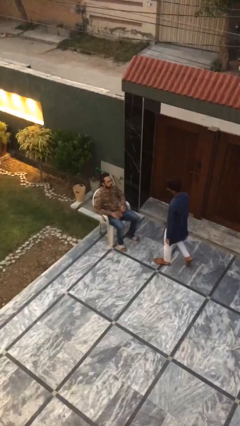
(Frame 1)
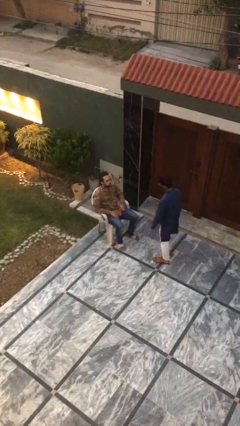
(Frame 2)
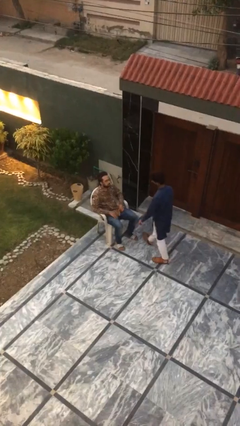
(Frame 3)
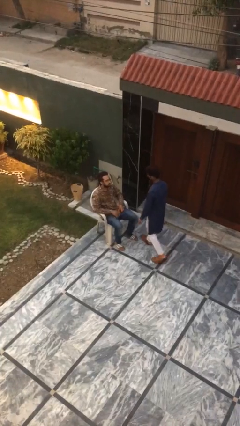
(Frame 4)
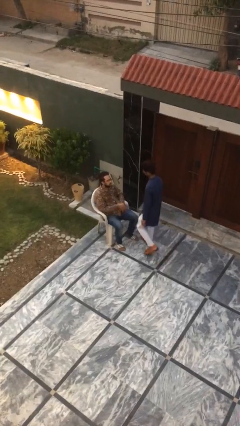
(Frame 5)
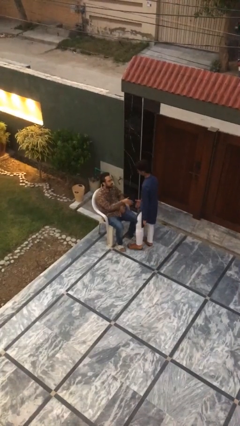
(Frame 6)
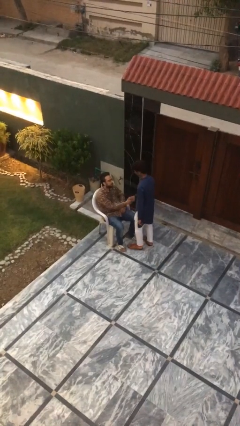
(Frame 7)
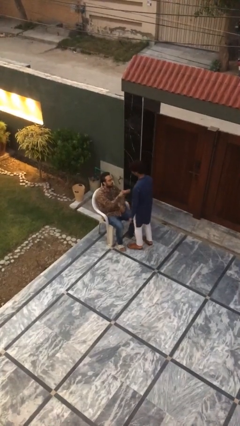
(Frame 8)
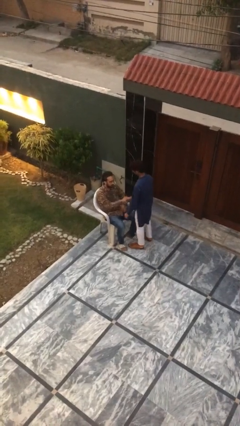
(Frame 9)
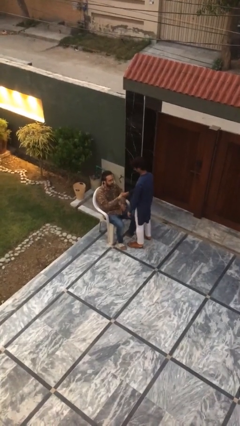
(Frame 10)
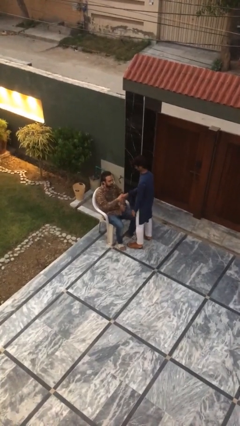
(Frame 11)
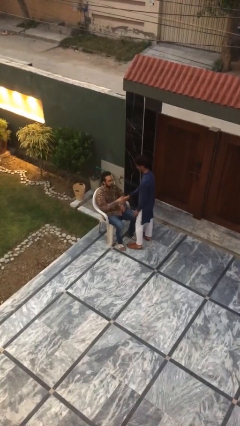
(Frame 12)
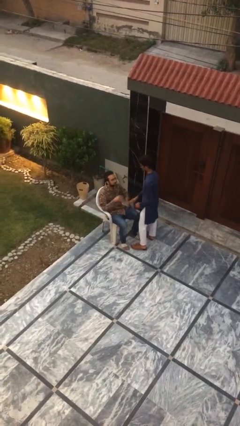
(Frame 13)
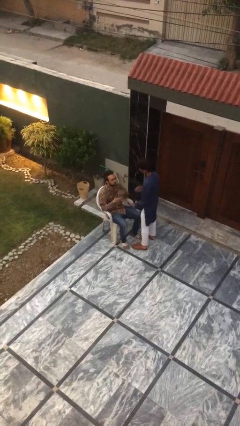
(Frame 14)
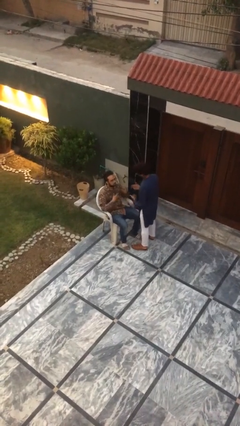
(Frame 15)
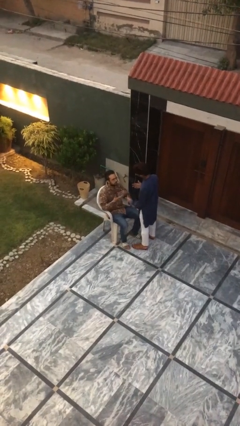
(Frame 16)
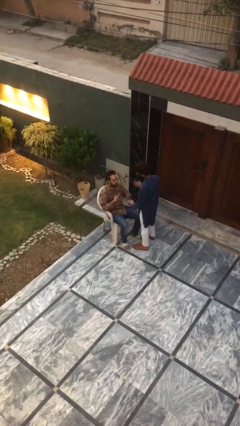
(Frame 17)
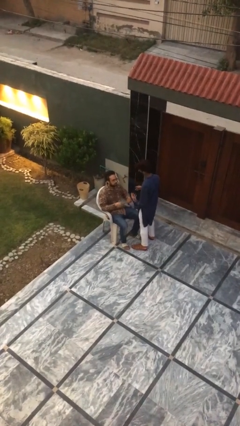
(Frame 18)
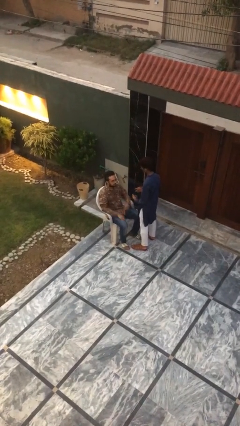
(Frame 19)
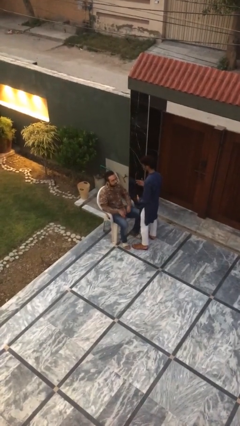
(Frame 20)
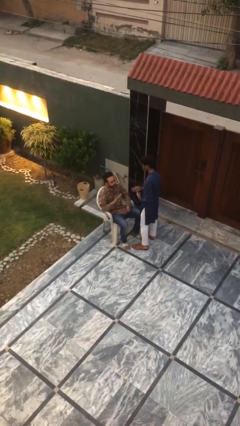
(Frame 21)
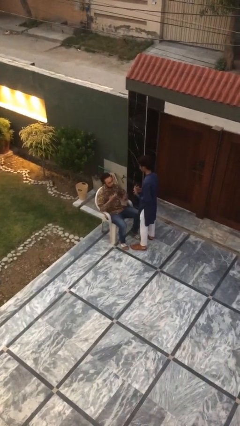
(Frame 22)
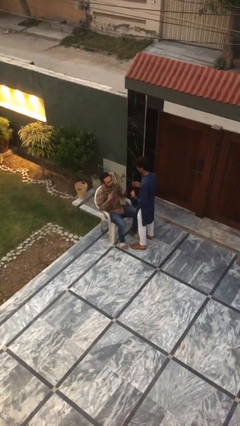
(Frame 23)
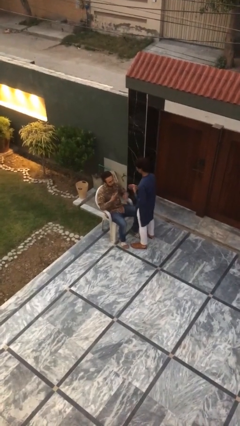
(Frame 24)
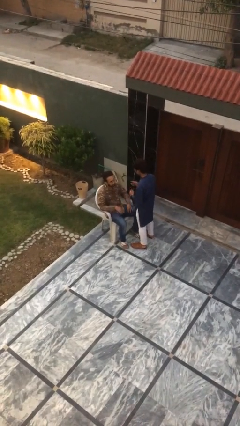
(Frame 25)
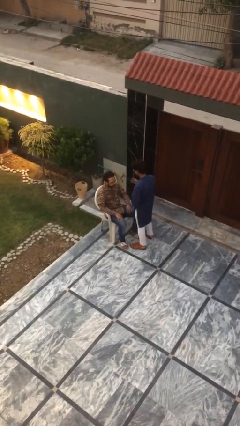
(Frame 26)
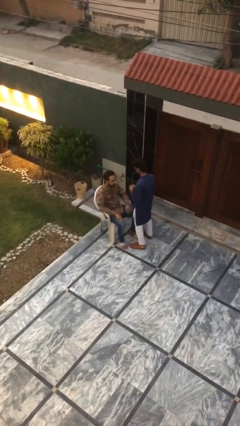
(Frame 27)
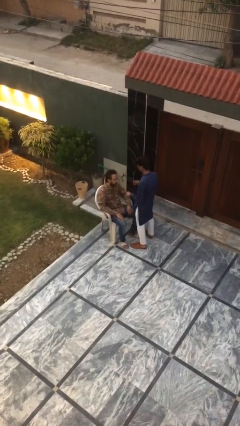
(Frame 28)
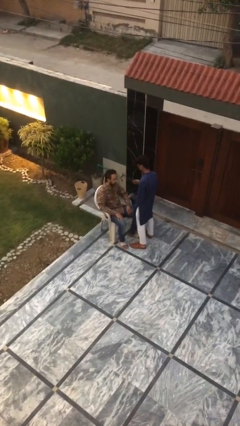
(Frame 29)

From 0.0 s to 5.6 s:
person shakes hand

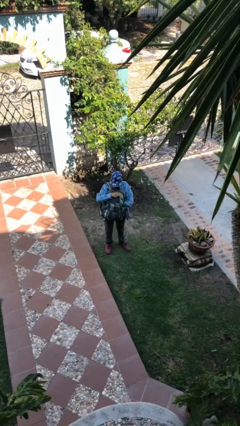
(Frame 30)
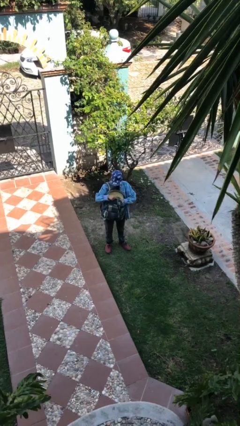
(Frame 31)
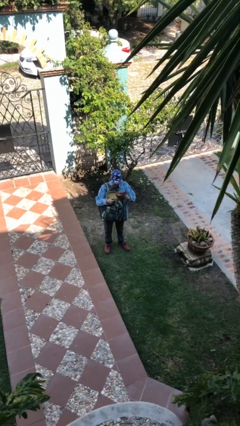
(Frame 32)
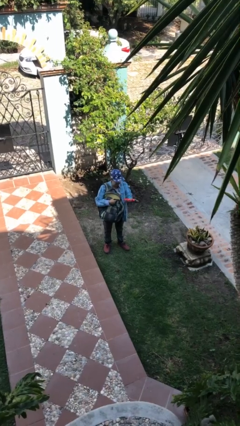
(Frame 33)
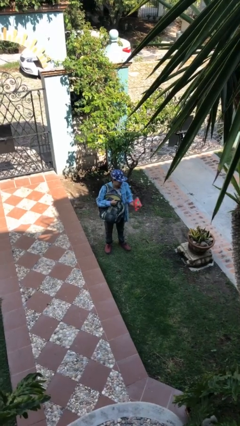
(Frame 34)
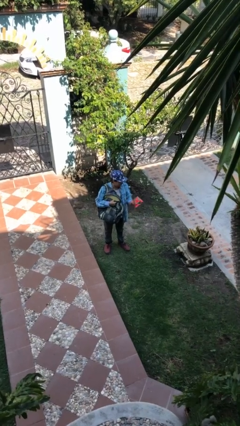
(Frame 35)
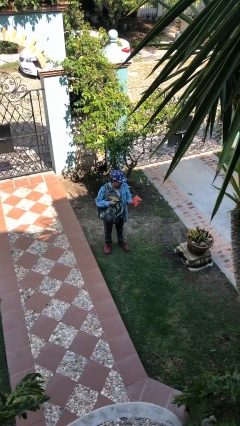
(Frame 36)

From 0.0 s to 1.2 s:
person takes object from backpack

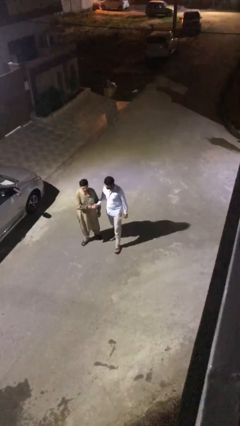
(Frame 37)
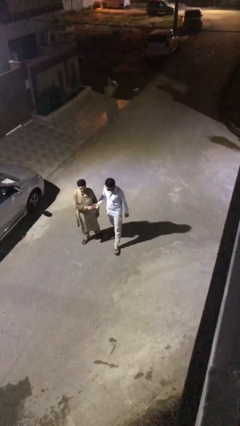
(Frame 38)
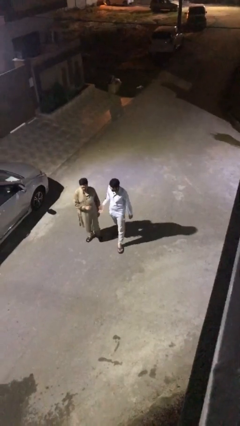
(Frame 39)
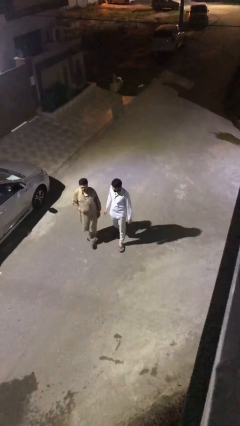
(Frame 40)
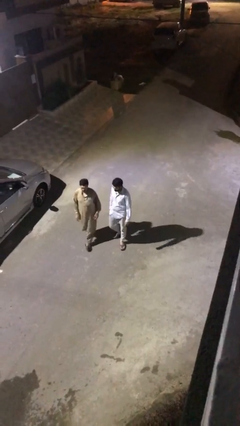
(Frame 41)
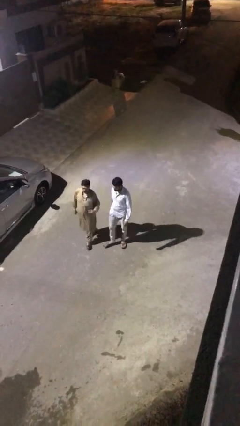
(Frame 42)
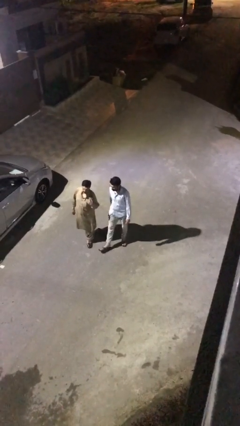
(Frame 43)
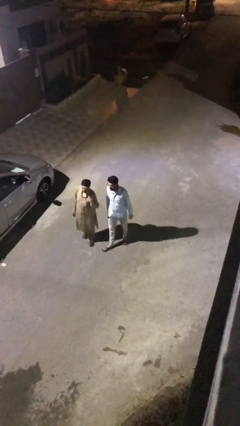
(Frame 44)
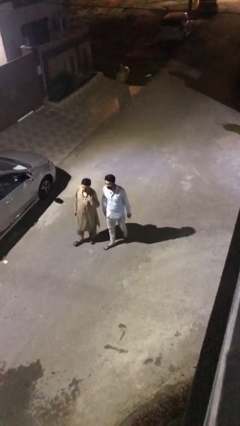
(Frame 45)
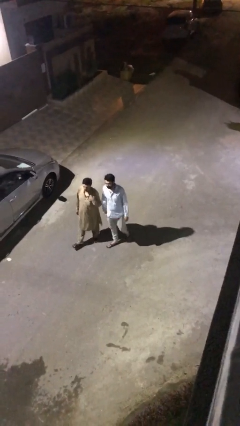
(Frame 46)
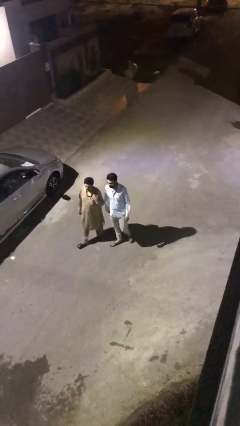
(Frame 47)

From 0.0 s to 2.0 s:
person talks to person

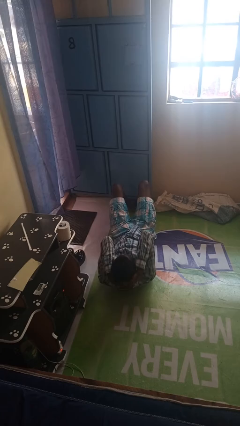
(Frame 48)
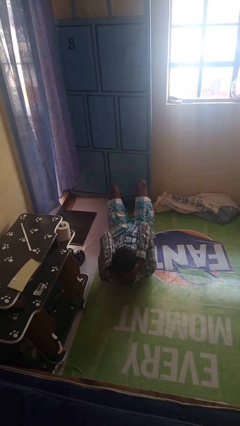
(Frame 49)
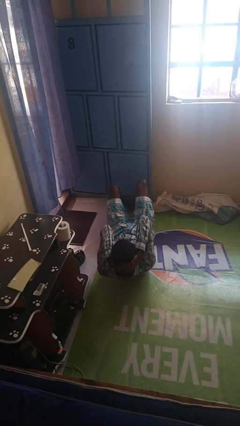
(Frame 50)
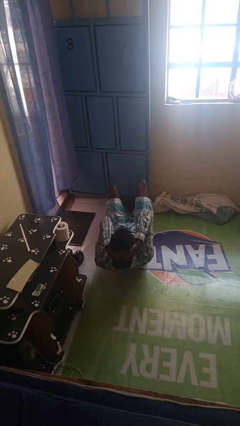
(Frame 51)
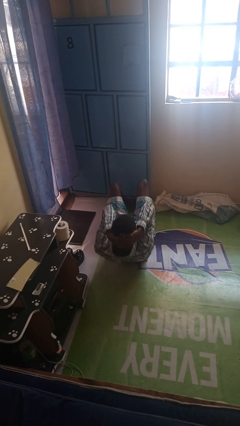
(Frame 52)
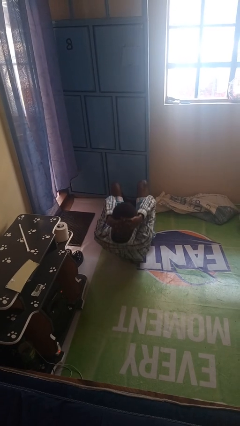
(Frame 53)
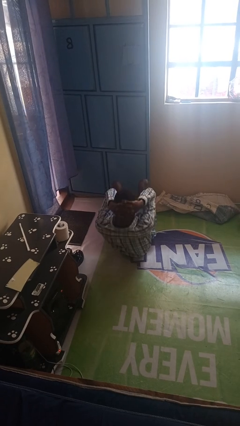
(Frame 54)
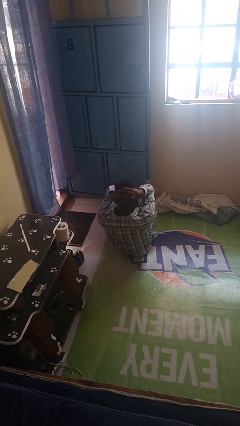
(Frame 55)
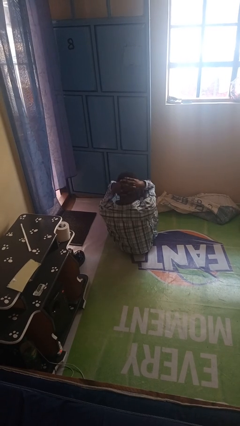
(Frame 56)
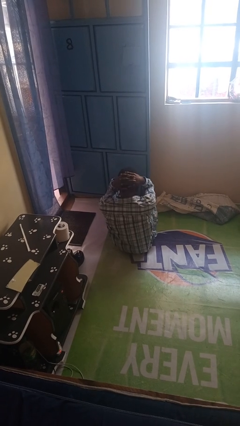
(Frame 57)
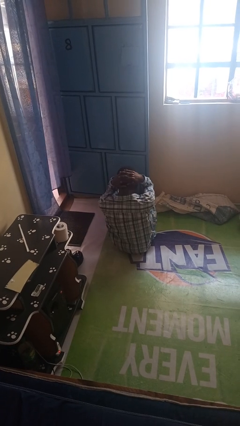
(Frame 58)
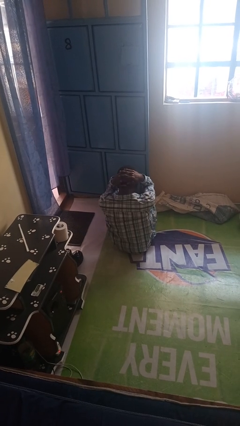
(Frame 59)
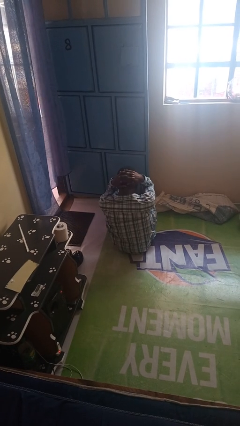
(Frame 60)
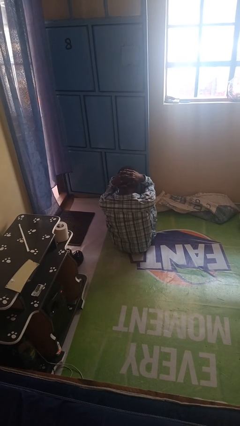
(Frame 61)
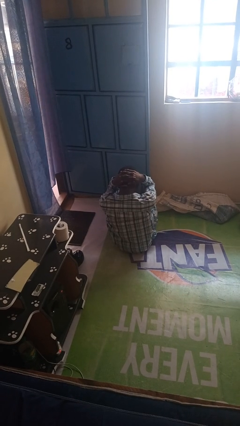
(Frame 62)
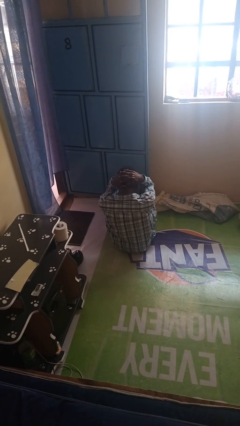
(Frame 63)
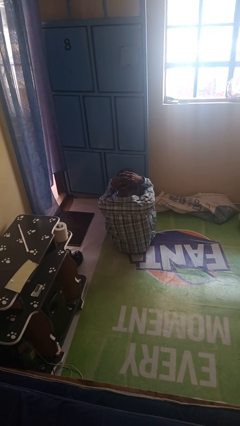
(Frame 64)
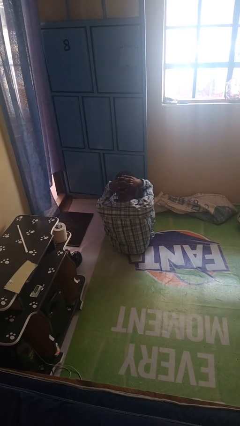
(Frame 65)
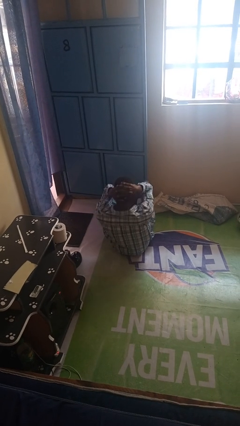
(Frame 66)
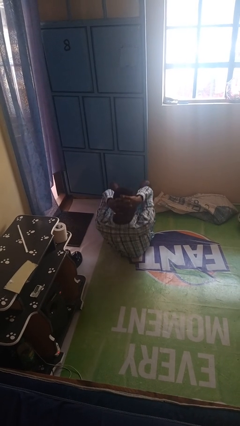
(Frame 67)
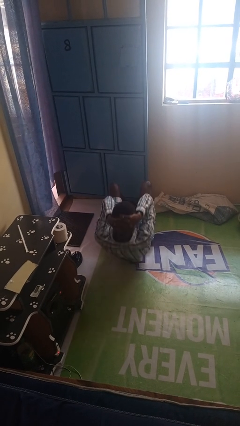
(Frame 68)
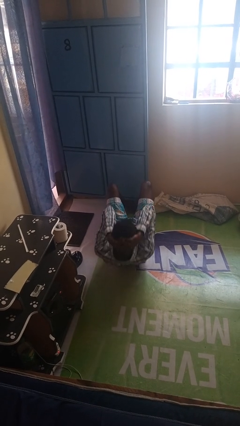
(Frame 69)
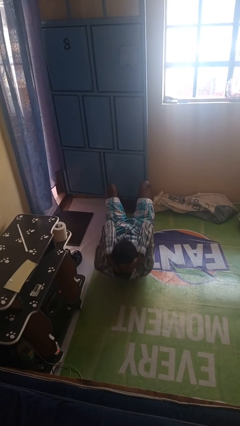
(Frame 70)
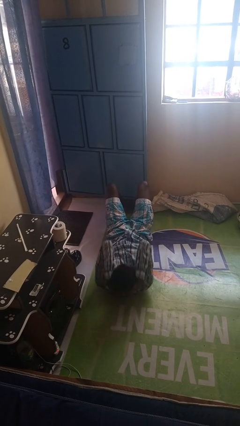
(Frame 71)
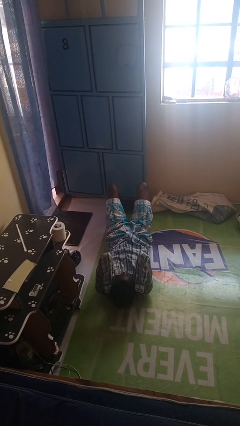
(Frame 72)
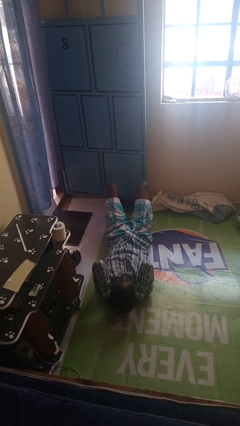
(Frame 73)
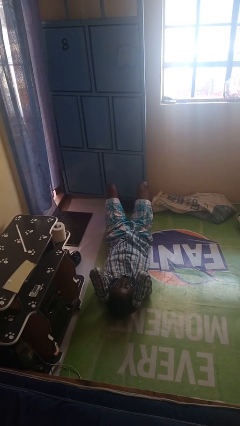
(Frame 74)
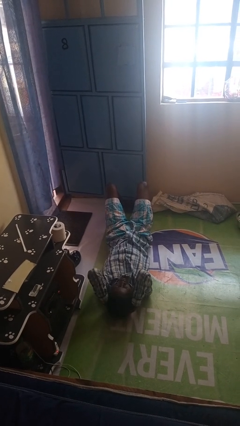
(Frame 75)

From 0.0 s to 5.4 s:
person exercises with situp

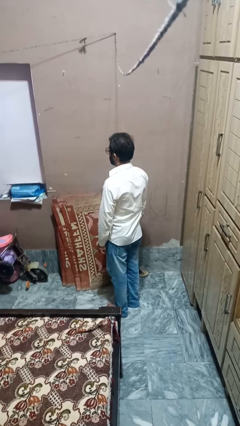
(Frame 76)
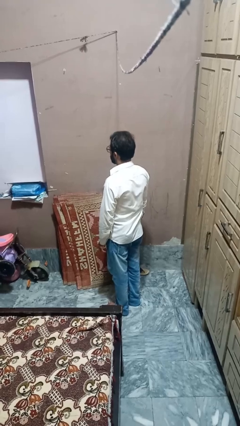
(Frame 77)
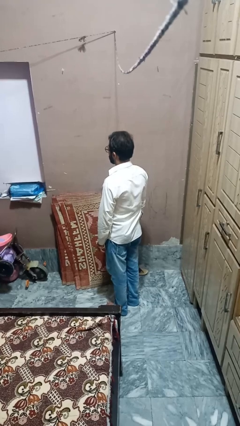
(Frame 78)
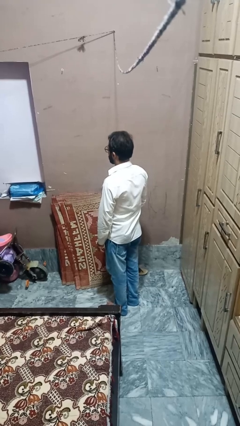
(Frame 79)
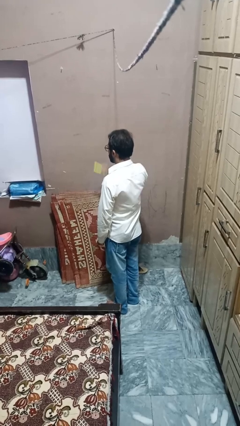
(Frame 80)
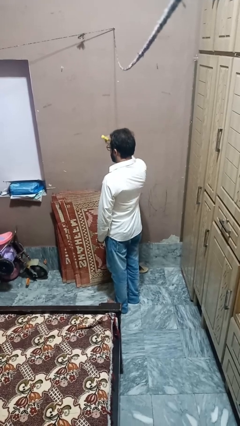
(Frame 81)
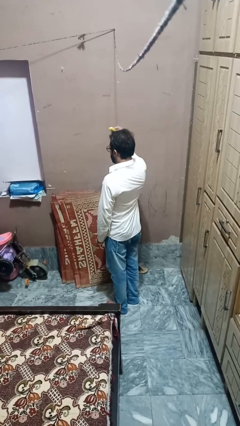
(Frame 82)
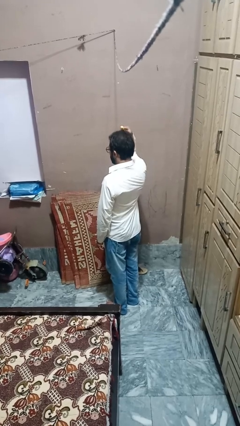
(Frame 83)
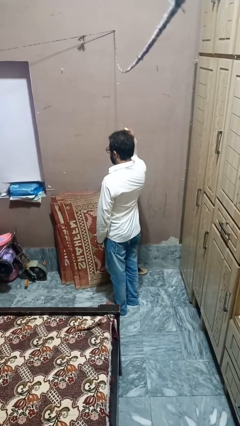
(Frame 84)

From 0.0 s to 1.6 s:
person brushes hair

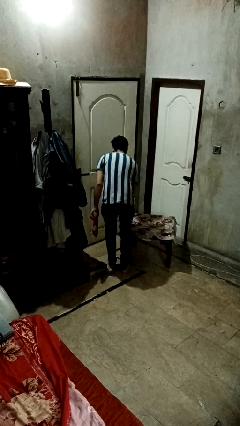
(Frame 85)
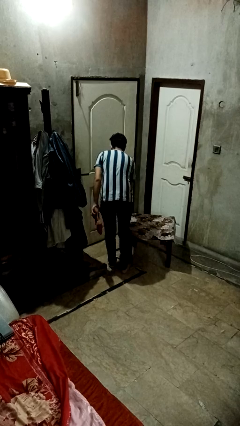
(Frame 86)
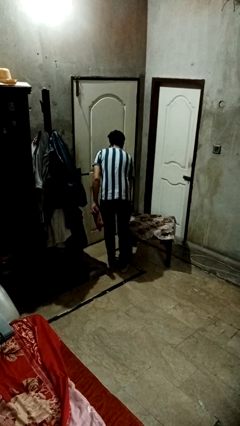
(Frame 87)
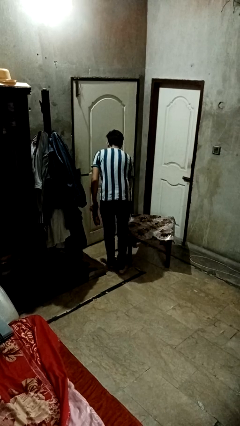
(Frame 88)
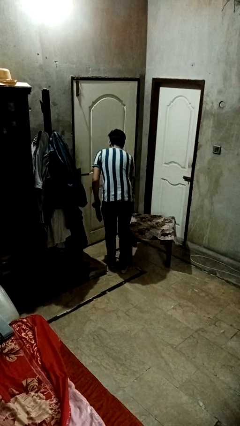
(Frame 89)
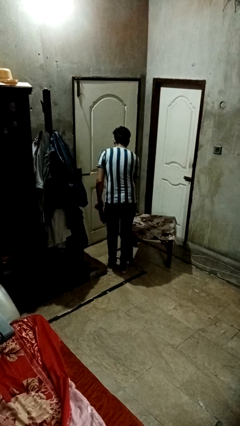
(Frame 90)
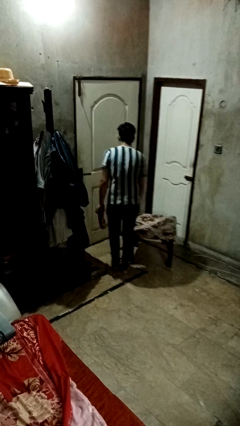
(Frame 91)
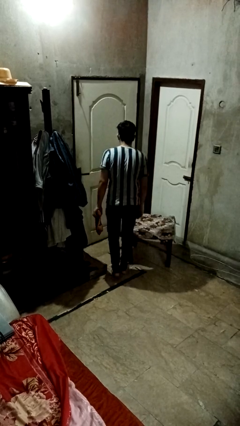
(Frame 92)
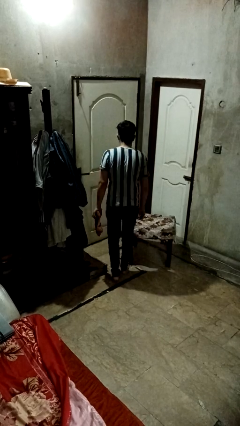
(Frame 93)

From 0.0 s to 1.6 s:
person bumps into table

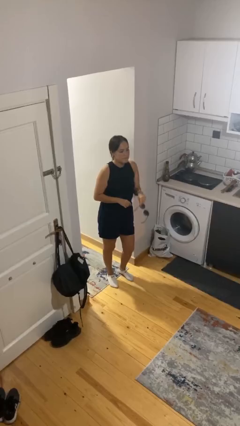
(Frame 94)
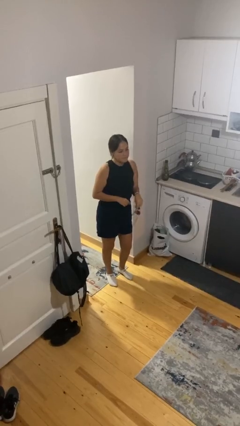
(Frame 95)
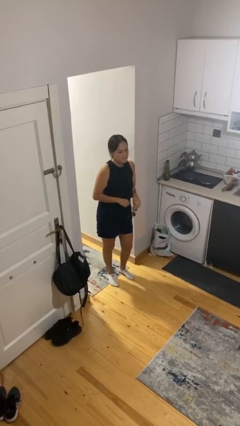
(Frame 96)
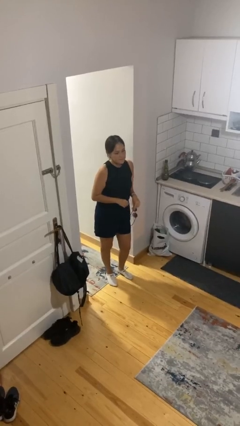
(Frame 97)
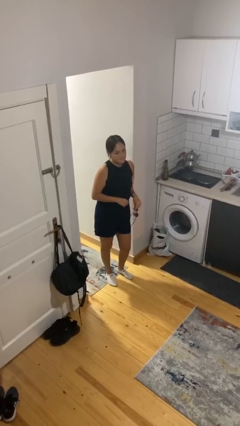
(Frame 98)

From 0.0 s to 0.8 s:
person takes off sunglasses
